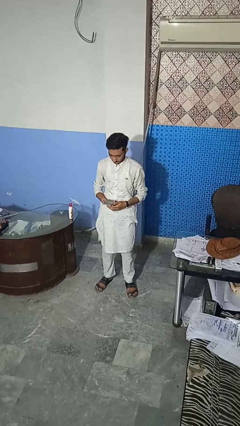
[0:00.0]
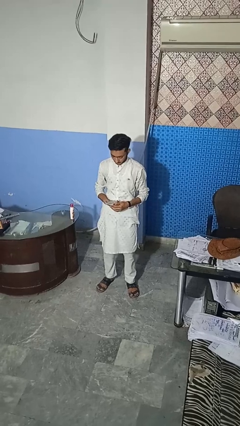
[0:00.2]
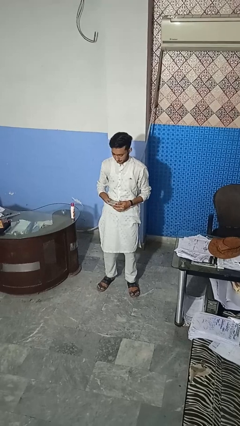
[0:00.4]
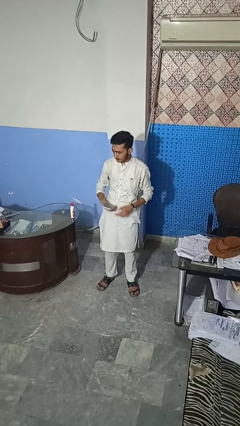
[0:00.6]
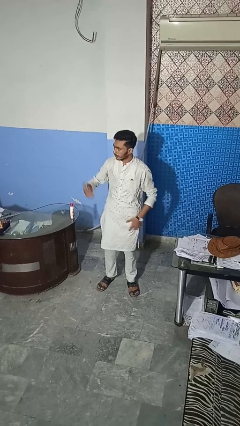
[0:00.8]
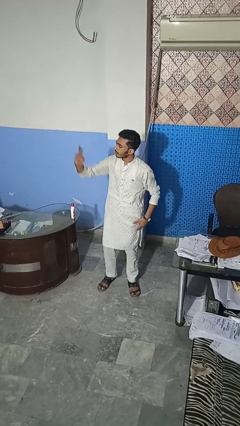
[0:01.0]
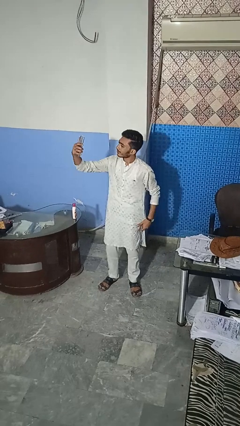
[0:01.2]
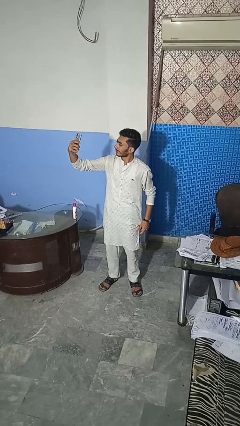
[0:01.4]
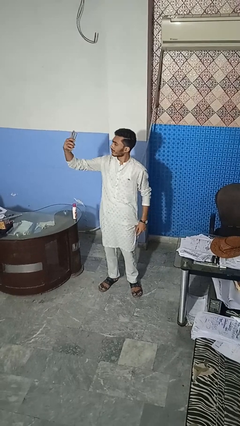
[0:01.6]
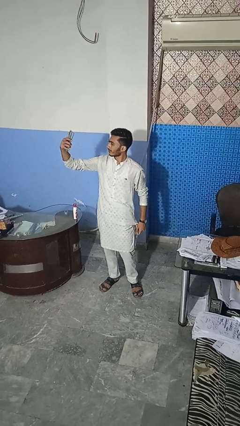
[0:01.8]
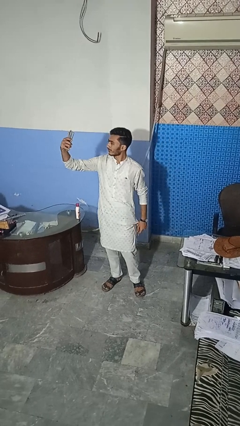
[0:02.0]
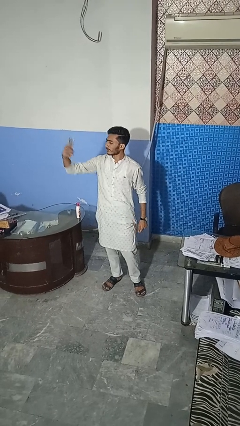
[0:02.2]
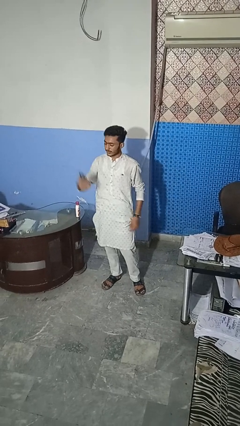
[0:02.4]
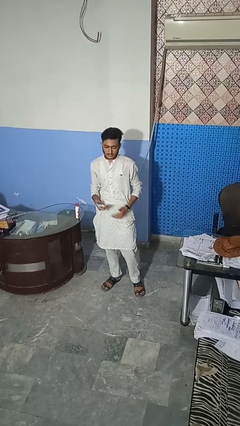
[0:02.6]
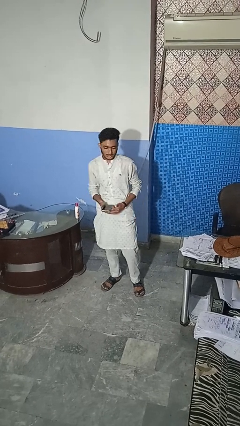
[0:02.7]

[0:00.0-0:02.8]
person takes selfie

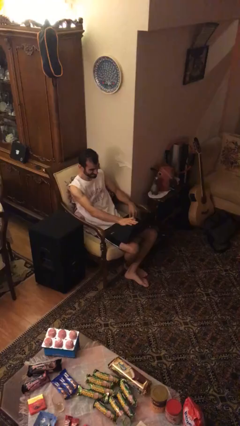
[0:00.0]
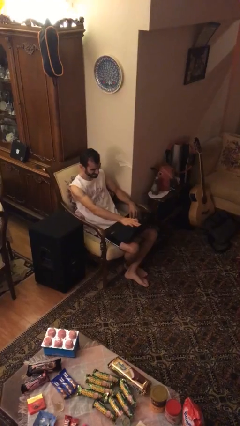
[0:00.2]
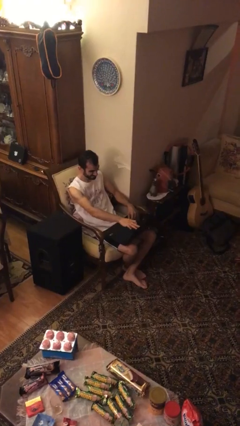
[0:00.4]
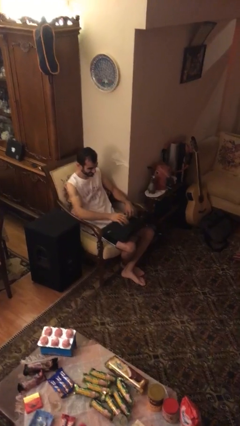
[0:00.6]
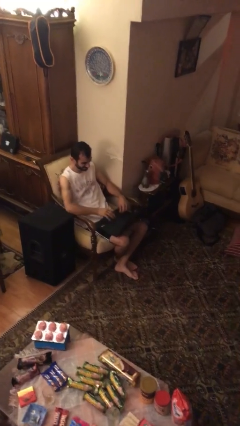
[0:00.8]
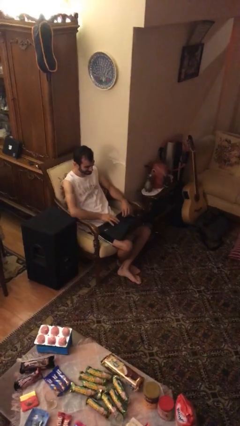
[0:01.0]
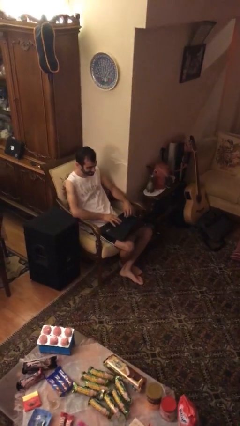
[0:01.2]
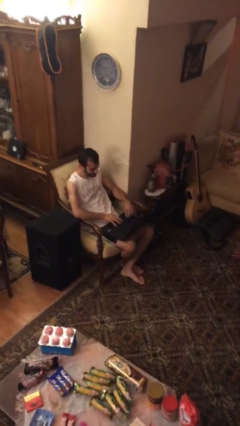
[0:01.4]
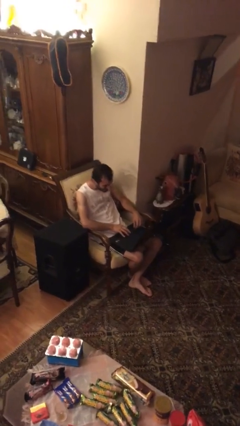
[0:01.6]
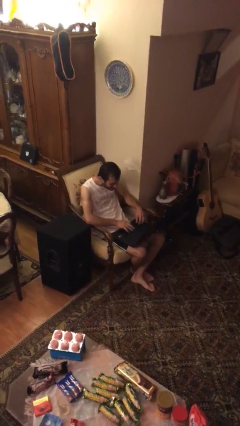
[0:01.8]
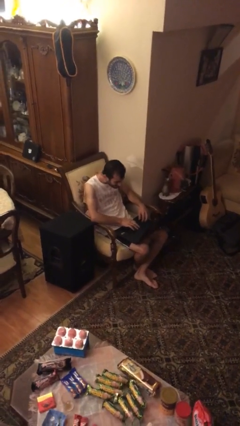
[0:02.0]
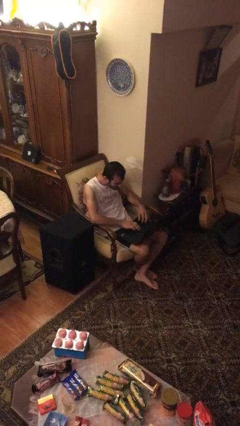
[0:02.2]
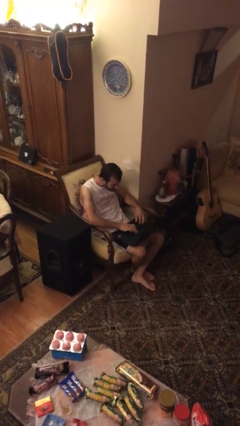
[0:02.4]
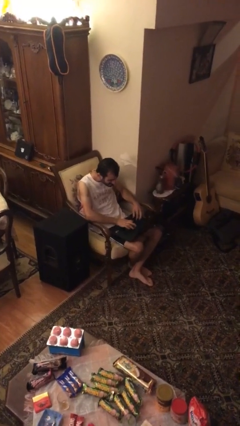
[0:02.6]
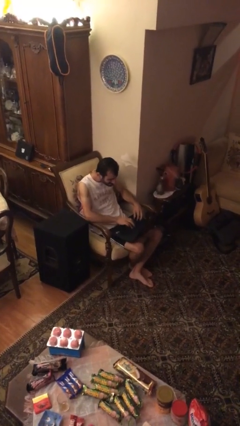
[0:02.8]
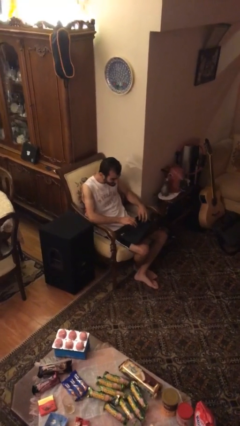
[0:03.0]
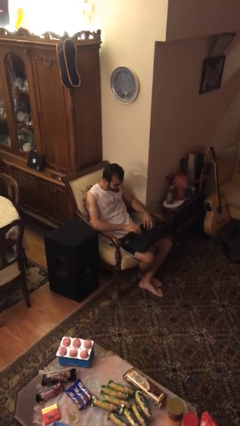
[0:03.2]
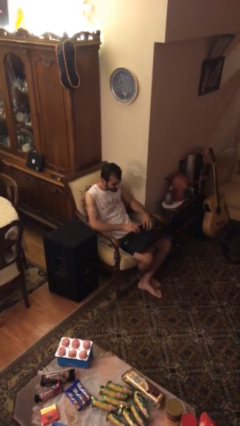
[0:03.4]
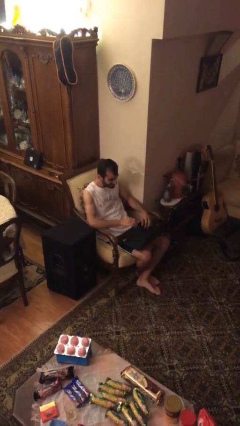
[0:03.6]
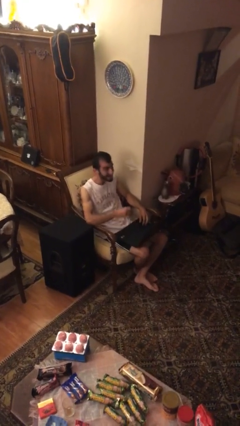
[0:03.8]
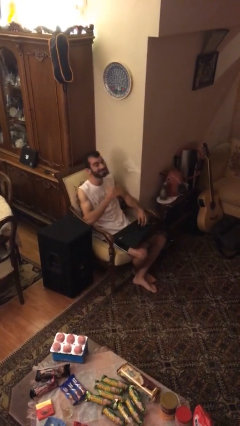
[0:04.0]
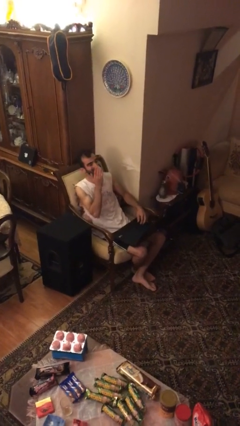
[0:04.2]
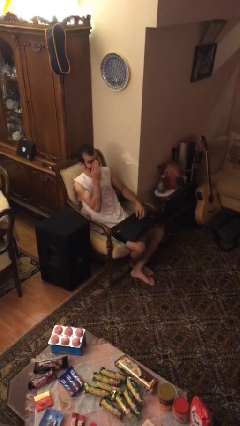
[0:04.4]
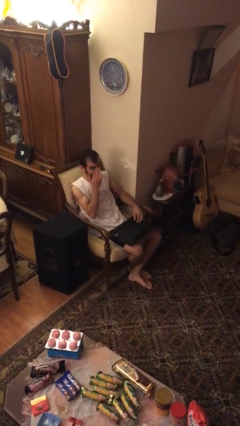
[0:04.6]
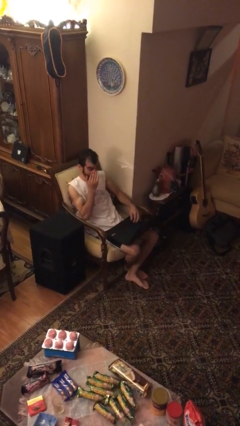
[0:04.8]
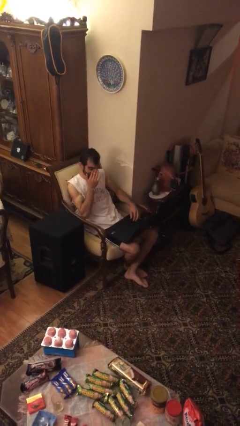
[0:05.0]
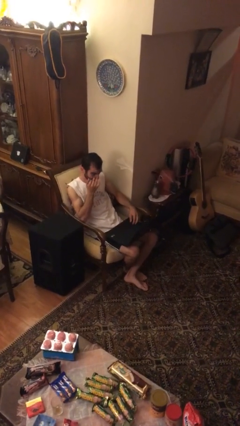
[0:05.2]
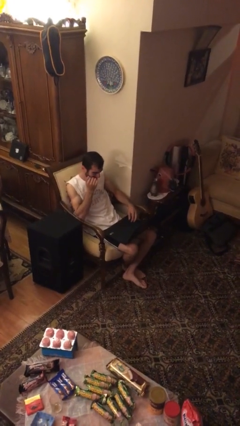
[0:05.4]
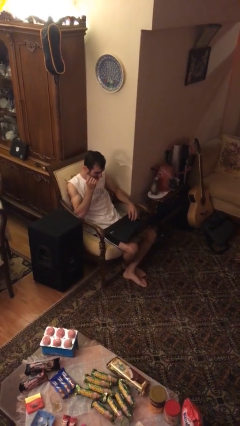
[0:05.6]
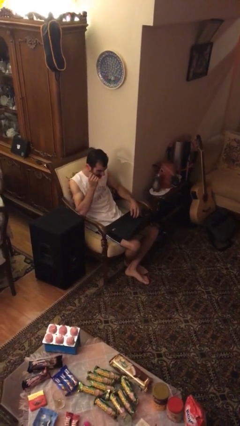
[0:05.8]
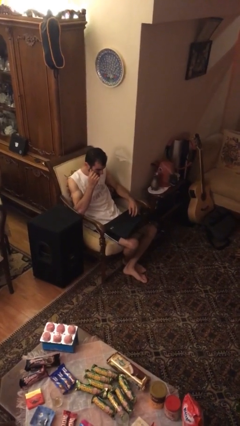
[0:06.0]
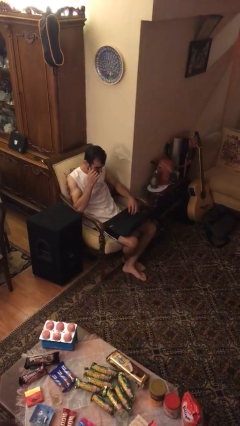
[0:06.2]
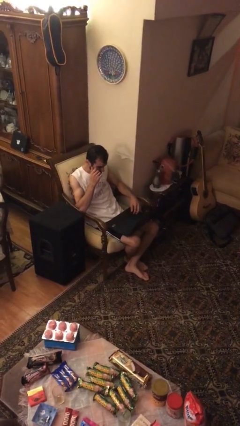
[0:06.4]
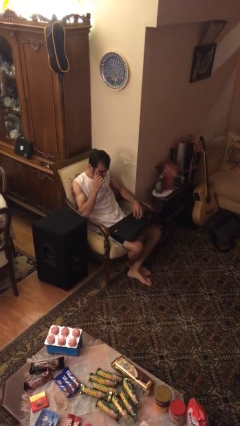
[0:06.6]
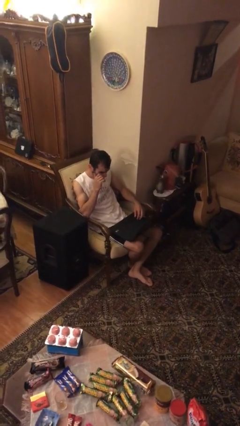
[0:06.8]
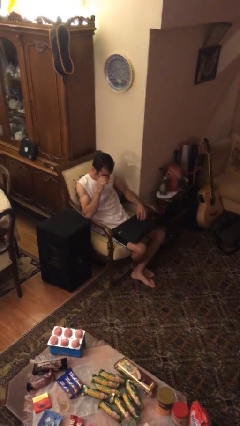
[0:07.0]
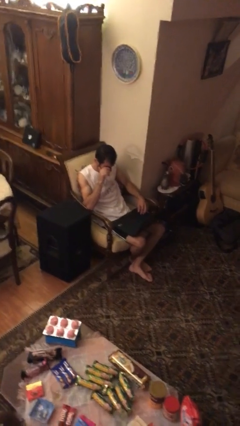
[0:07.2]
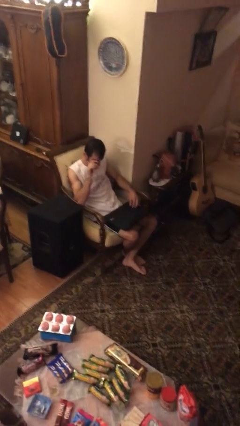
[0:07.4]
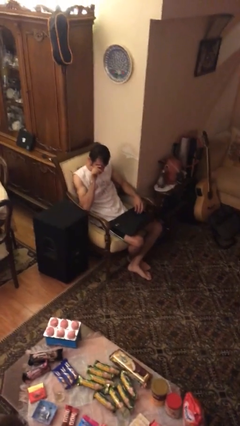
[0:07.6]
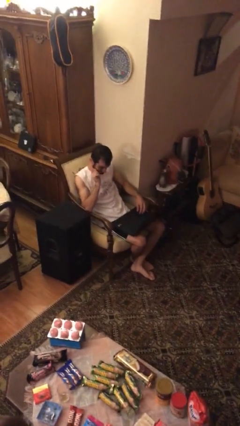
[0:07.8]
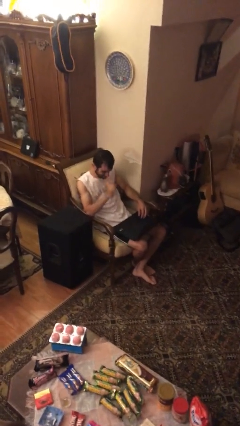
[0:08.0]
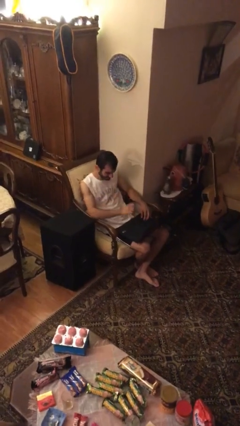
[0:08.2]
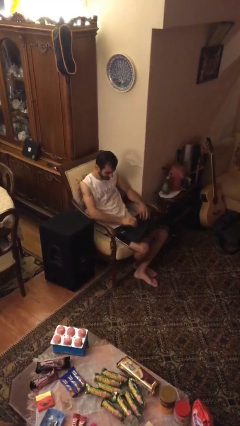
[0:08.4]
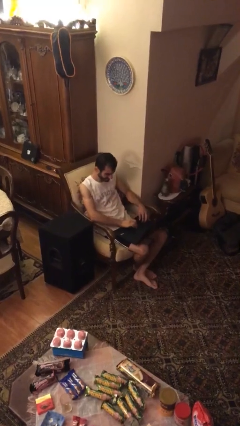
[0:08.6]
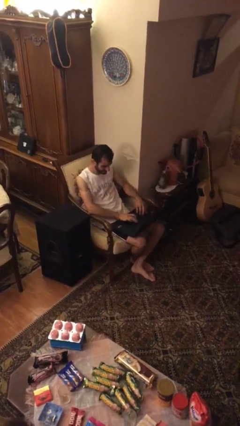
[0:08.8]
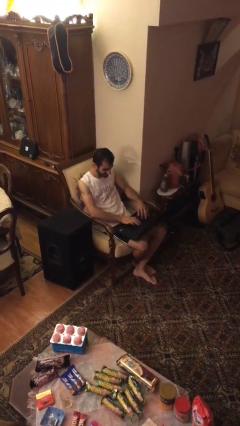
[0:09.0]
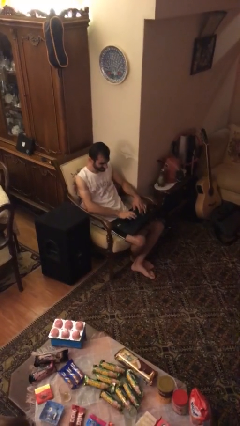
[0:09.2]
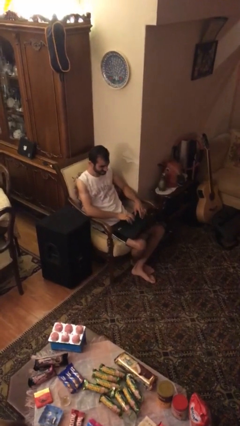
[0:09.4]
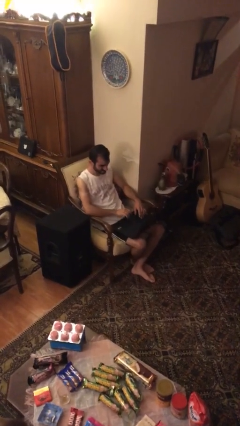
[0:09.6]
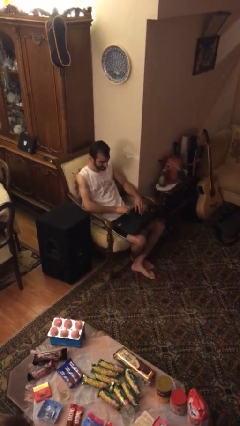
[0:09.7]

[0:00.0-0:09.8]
person interacts with laptop

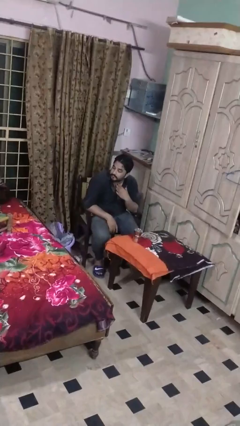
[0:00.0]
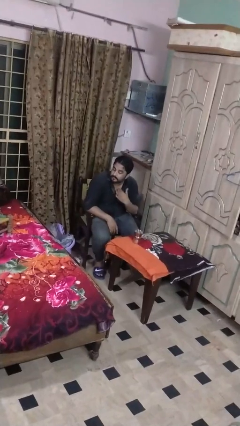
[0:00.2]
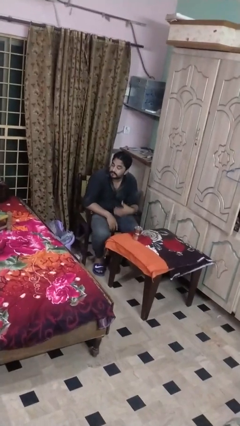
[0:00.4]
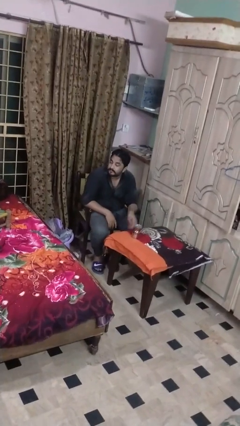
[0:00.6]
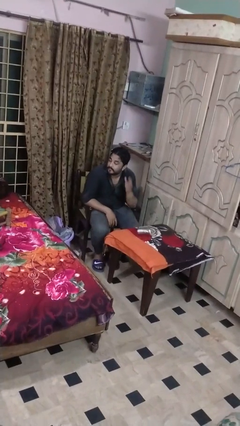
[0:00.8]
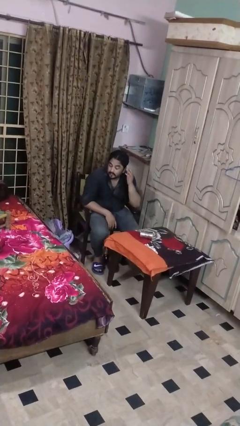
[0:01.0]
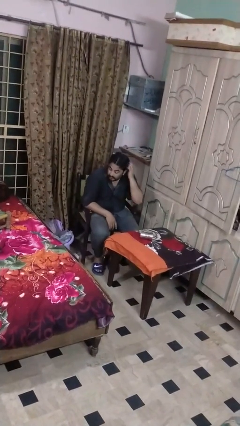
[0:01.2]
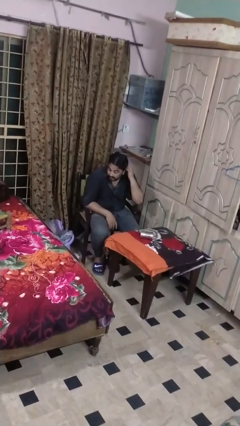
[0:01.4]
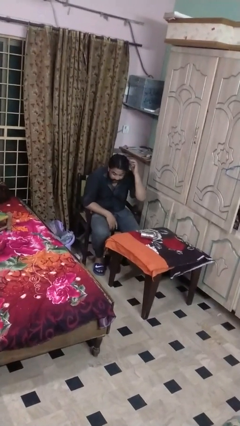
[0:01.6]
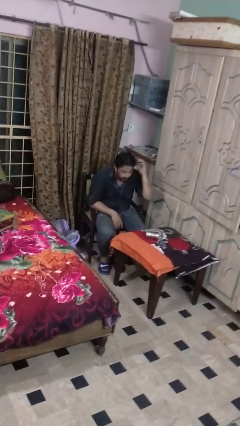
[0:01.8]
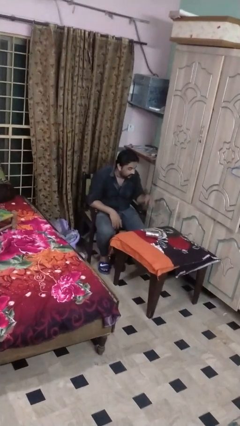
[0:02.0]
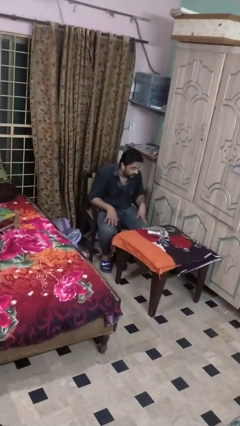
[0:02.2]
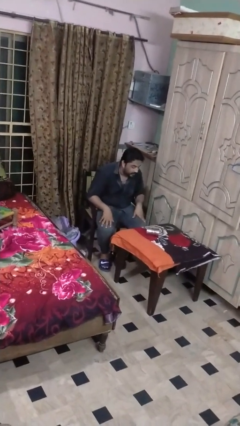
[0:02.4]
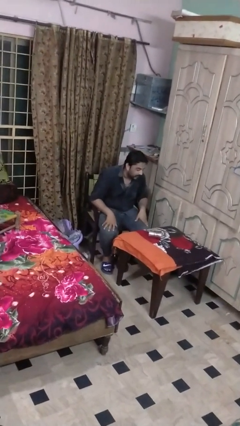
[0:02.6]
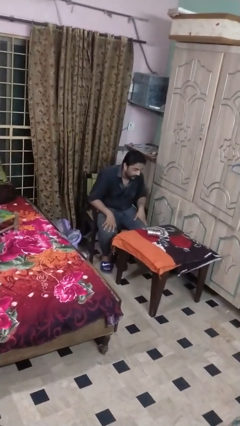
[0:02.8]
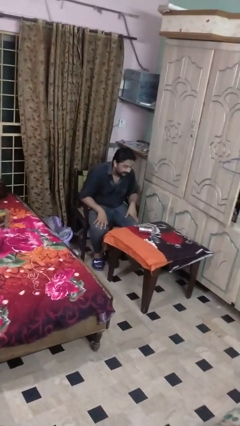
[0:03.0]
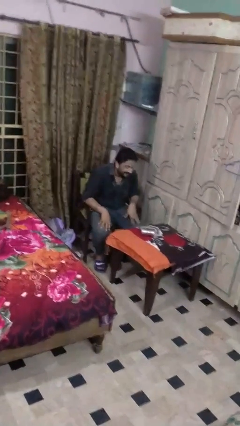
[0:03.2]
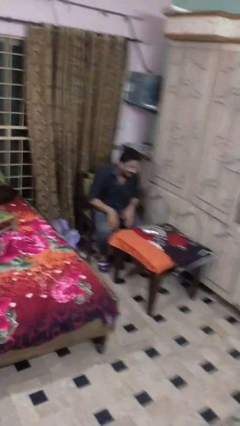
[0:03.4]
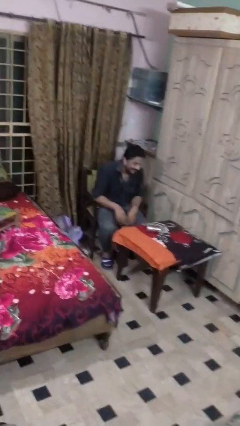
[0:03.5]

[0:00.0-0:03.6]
person knocks over glass

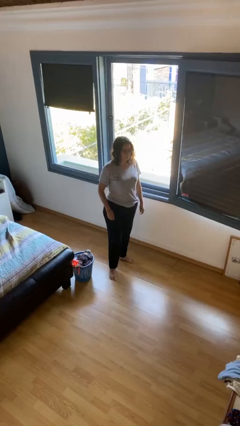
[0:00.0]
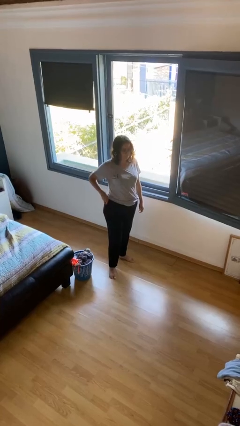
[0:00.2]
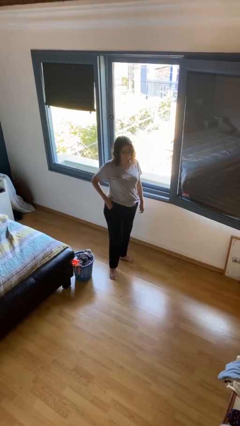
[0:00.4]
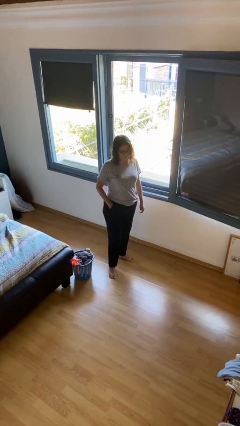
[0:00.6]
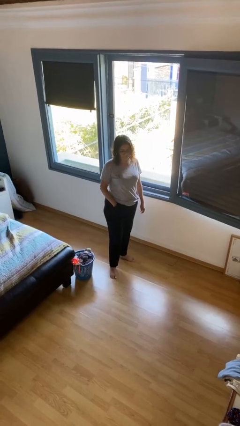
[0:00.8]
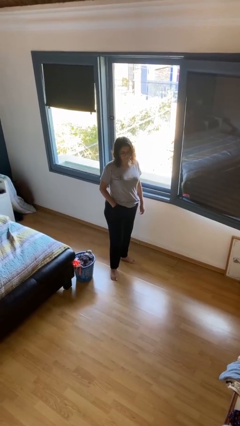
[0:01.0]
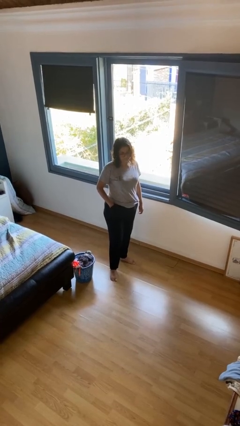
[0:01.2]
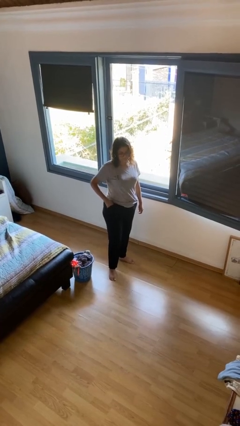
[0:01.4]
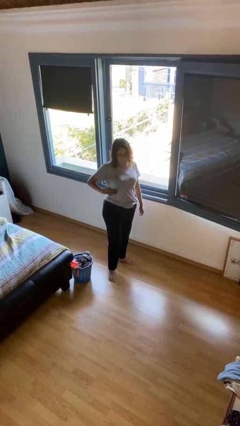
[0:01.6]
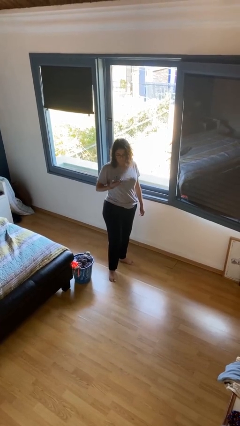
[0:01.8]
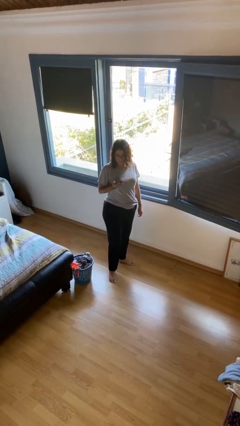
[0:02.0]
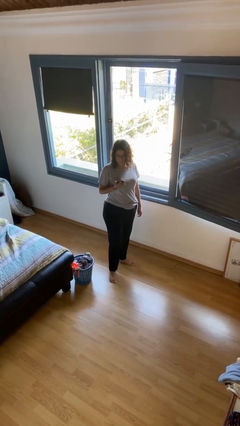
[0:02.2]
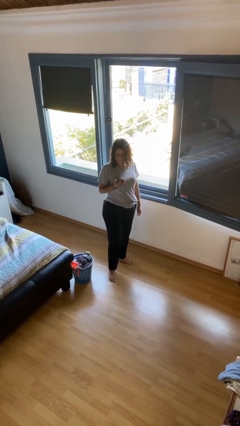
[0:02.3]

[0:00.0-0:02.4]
person takes phone from pocket
